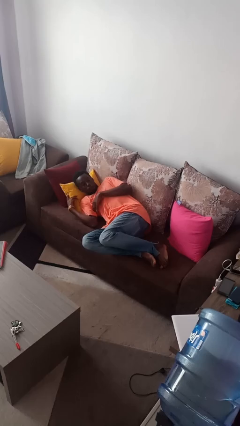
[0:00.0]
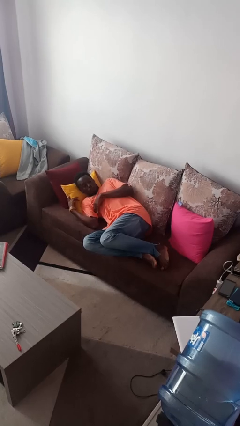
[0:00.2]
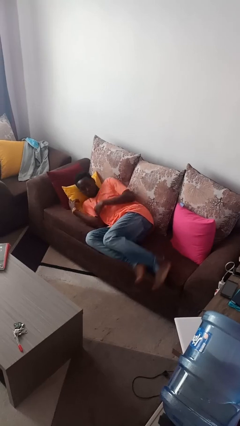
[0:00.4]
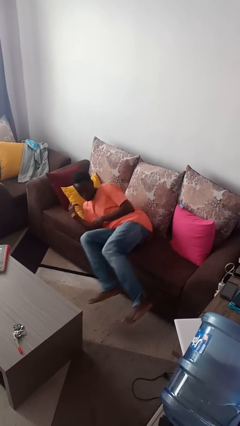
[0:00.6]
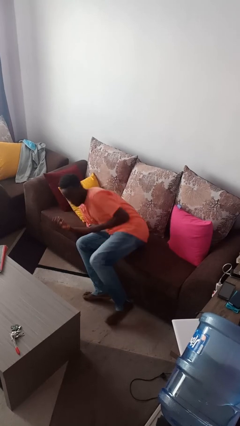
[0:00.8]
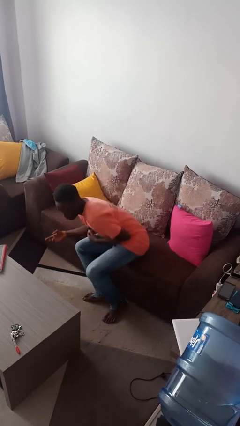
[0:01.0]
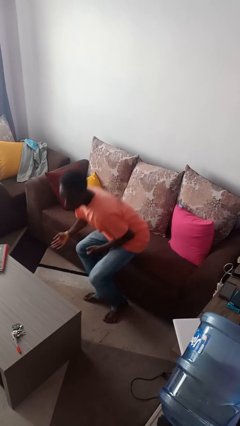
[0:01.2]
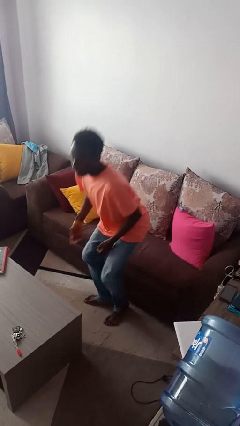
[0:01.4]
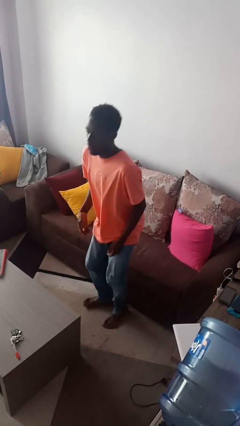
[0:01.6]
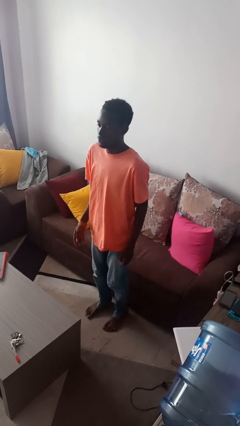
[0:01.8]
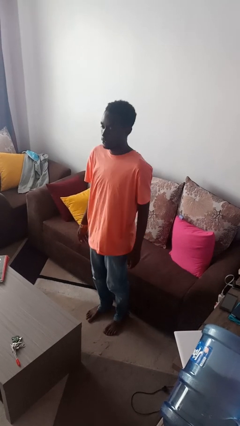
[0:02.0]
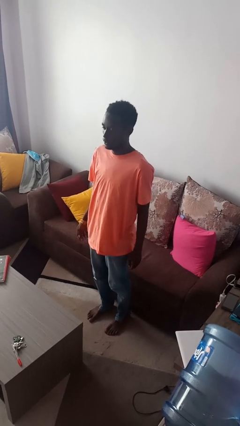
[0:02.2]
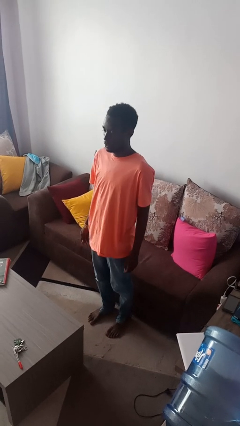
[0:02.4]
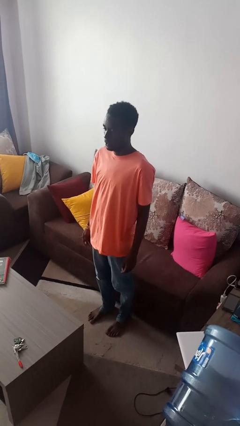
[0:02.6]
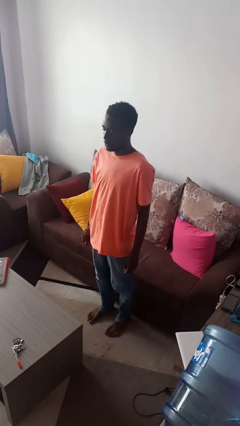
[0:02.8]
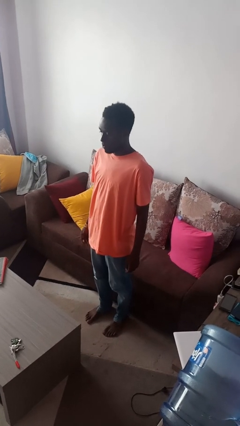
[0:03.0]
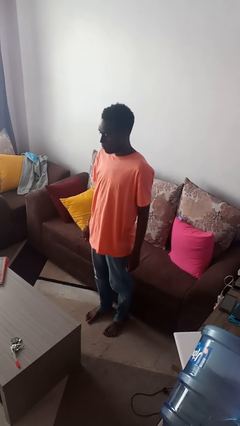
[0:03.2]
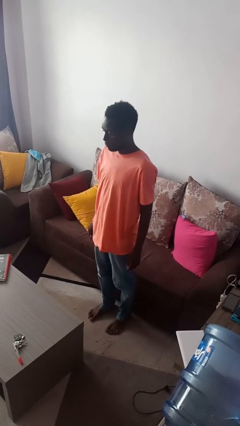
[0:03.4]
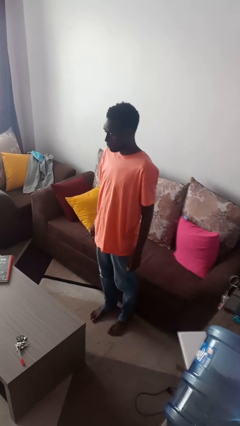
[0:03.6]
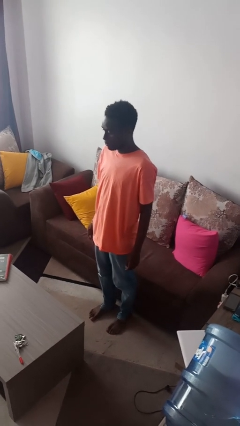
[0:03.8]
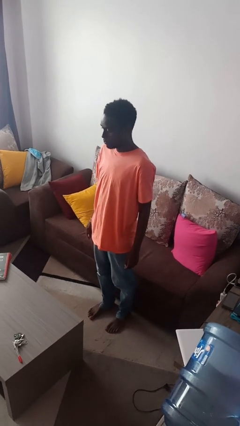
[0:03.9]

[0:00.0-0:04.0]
person stands up

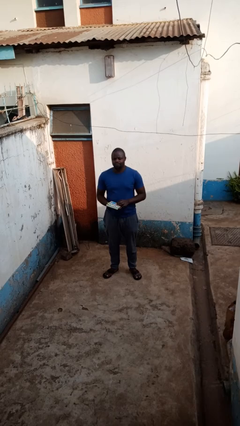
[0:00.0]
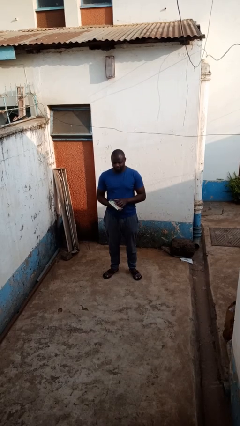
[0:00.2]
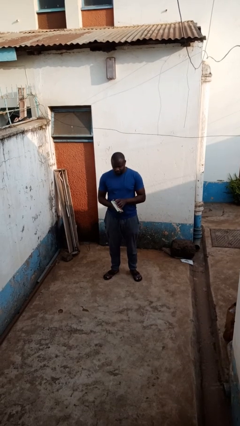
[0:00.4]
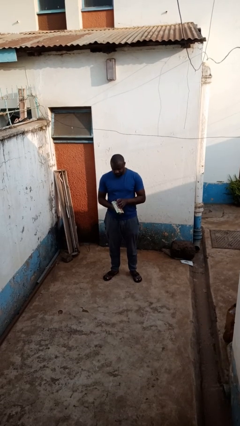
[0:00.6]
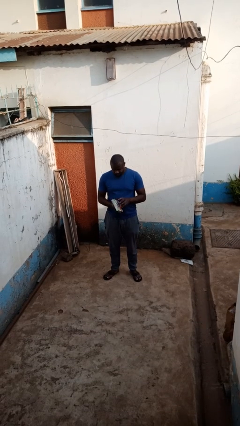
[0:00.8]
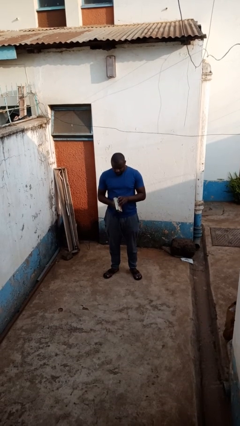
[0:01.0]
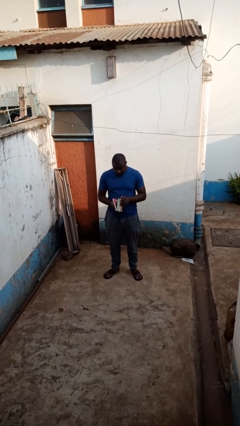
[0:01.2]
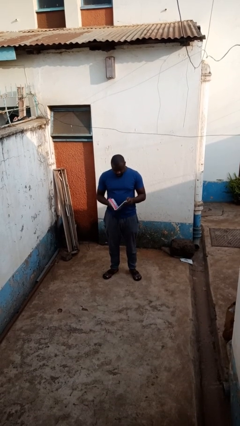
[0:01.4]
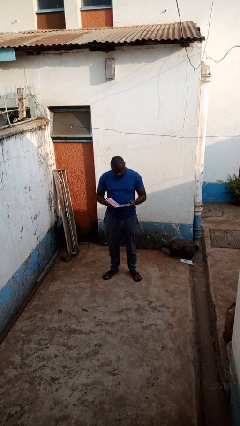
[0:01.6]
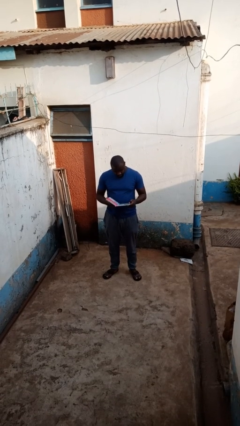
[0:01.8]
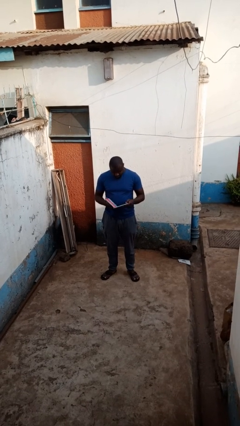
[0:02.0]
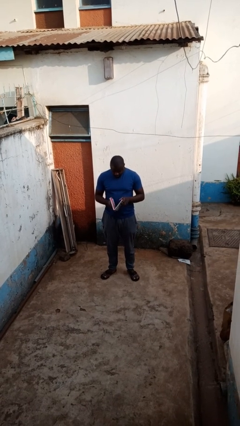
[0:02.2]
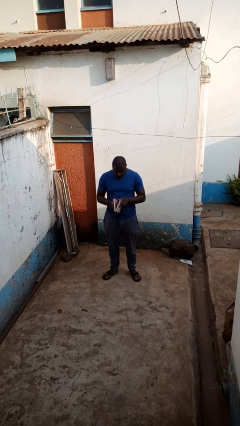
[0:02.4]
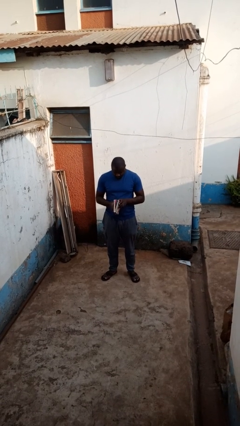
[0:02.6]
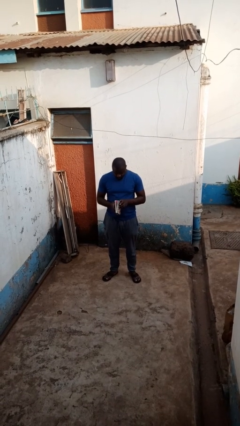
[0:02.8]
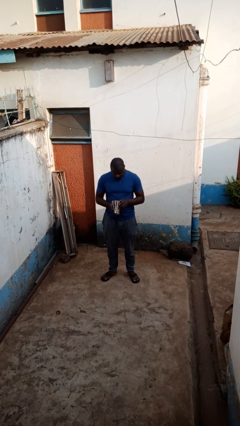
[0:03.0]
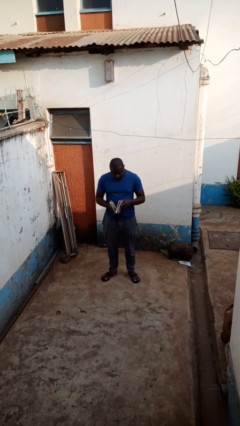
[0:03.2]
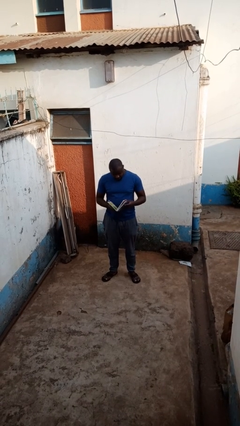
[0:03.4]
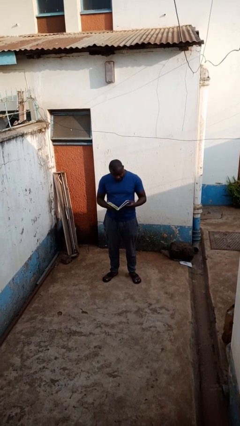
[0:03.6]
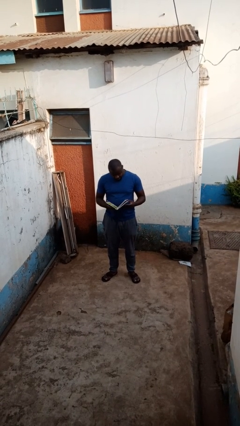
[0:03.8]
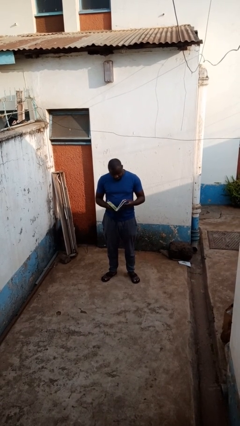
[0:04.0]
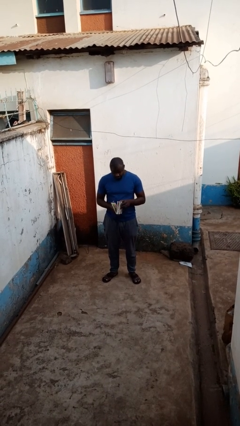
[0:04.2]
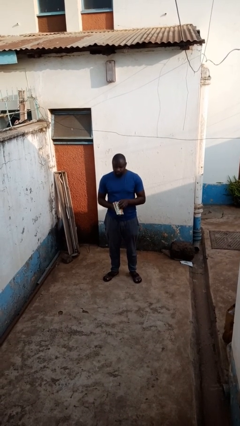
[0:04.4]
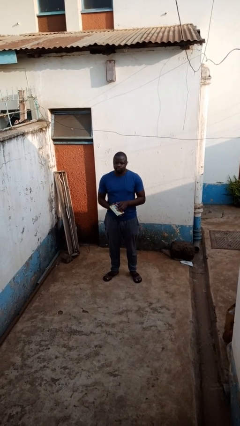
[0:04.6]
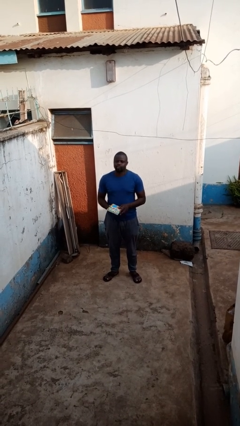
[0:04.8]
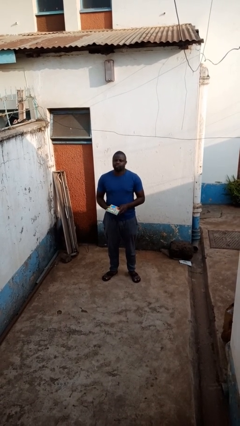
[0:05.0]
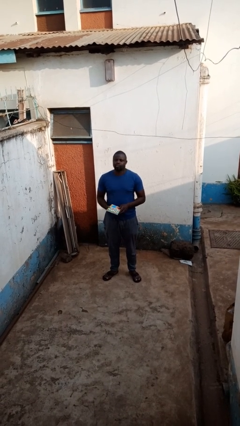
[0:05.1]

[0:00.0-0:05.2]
person reads book

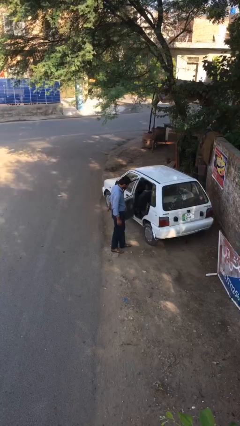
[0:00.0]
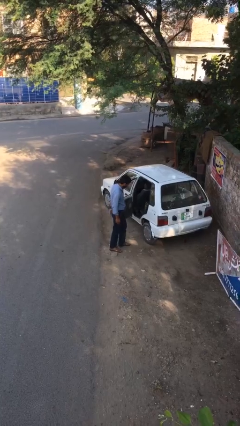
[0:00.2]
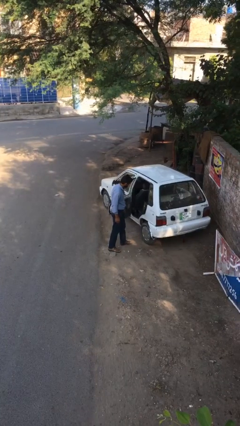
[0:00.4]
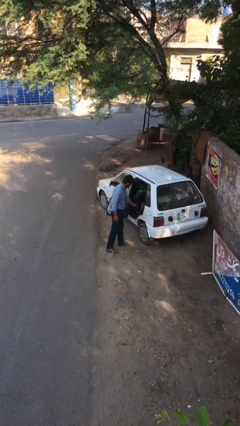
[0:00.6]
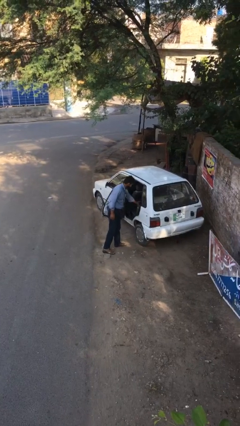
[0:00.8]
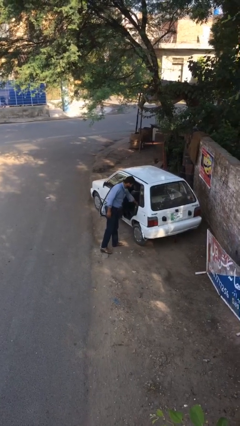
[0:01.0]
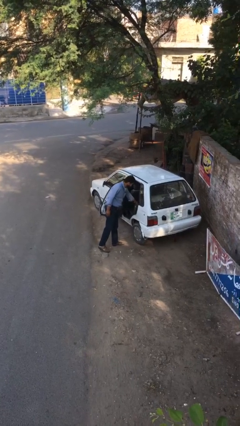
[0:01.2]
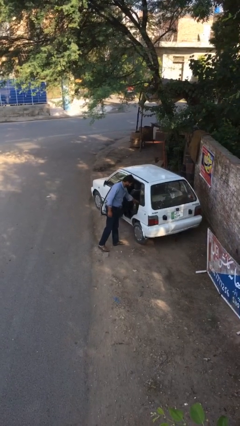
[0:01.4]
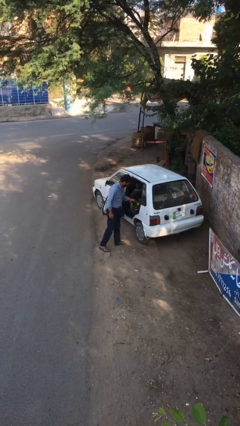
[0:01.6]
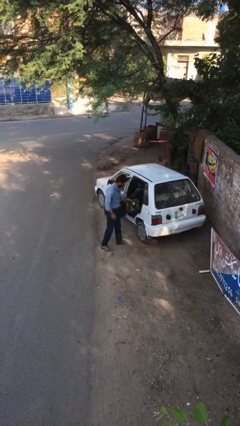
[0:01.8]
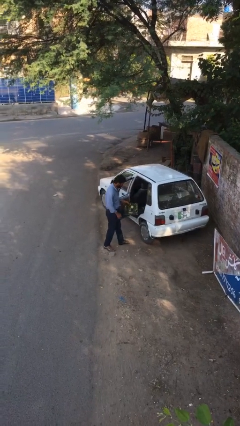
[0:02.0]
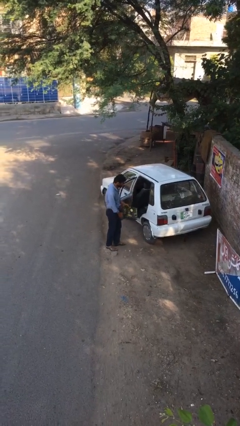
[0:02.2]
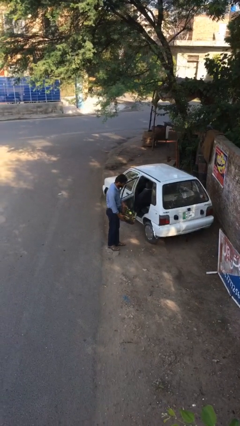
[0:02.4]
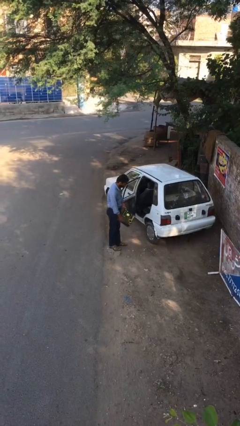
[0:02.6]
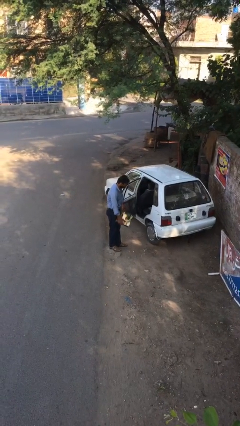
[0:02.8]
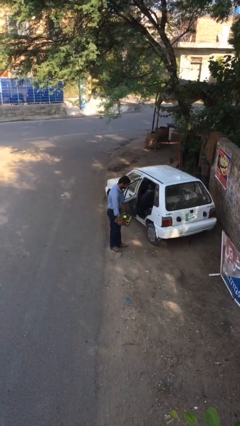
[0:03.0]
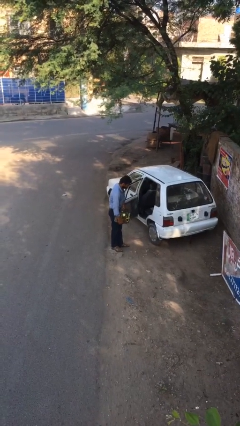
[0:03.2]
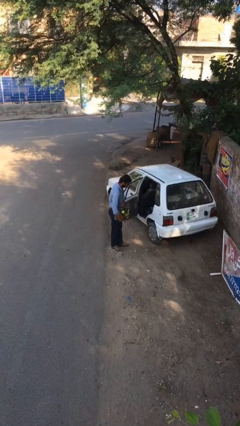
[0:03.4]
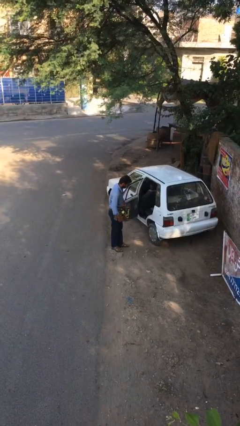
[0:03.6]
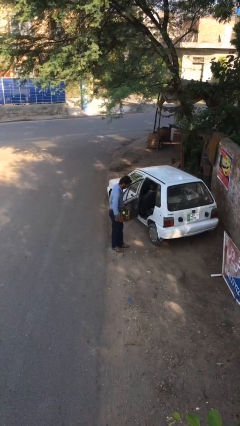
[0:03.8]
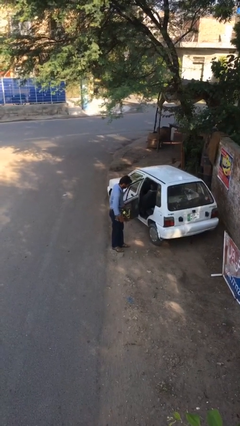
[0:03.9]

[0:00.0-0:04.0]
person unloads car

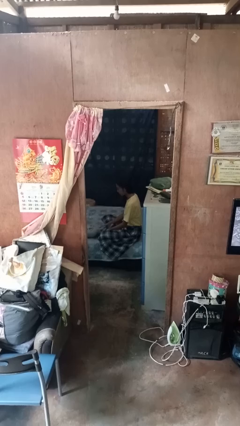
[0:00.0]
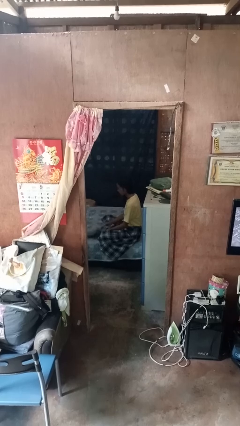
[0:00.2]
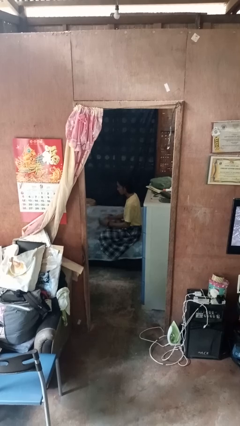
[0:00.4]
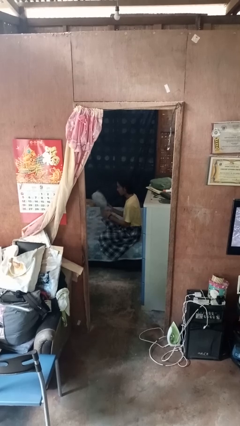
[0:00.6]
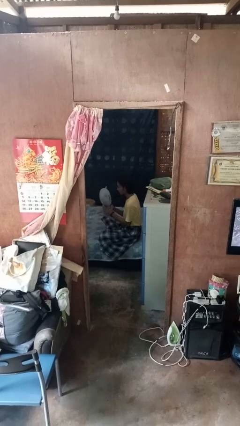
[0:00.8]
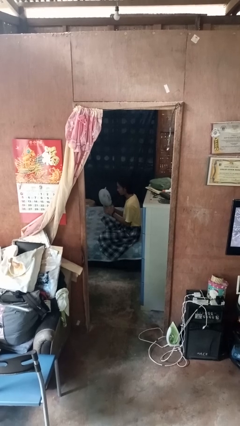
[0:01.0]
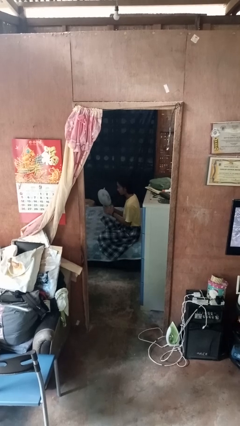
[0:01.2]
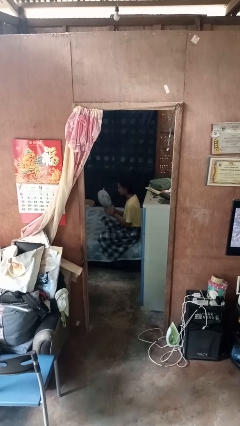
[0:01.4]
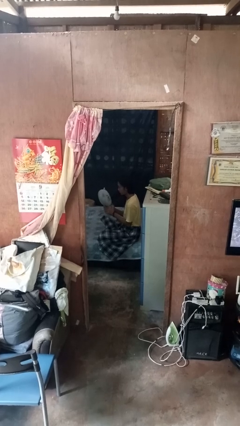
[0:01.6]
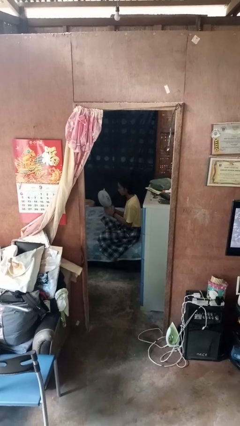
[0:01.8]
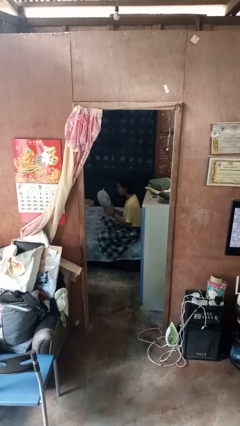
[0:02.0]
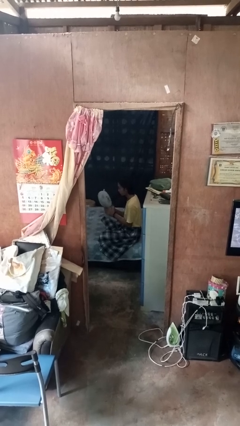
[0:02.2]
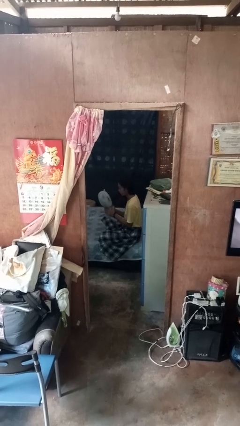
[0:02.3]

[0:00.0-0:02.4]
person picks up object from bed

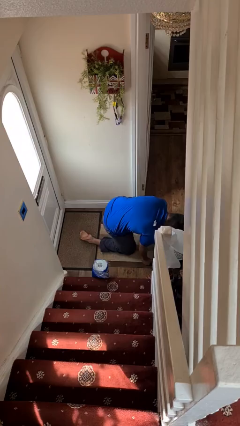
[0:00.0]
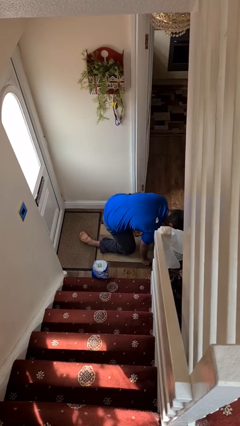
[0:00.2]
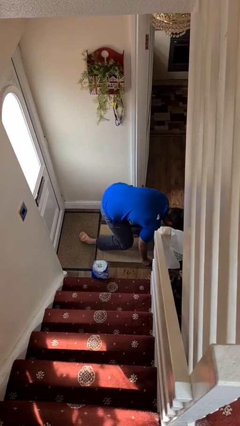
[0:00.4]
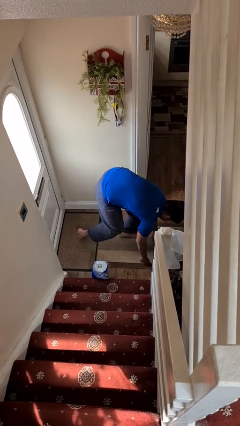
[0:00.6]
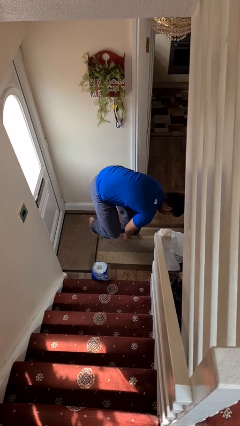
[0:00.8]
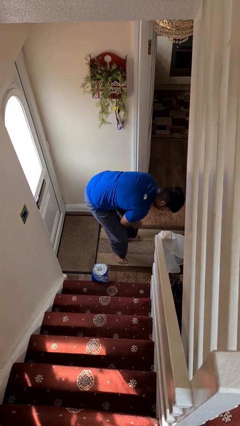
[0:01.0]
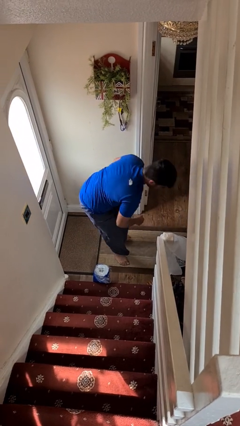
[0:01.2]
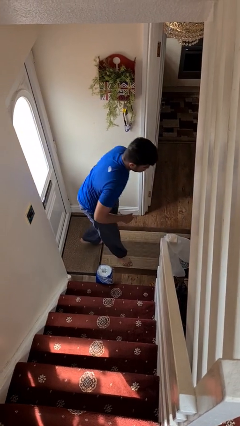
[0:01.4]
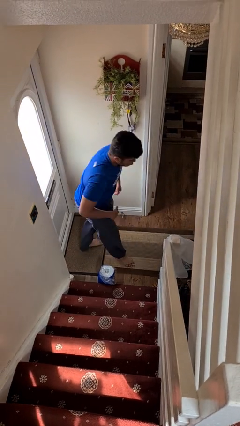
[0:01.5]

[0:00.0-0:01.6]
person stands up from floor
